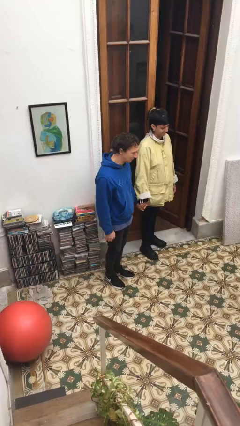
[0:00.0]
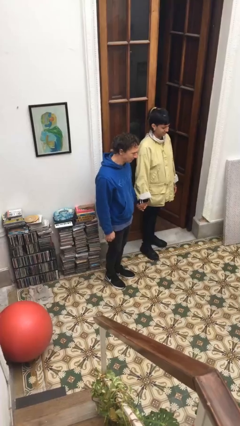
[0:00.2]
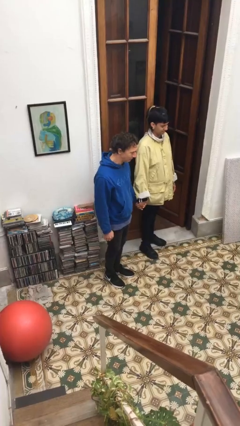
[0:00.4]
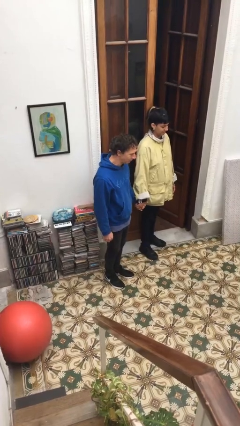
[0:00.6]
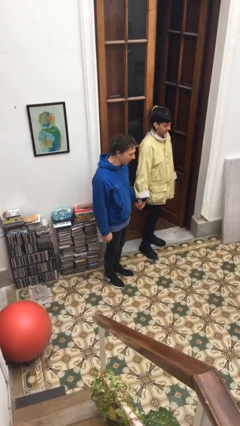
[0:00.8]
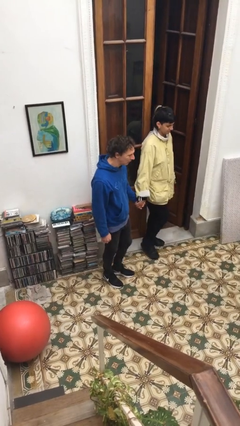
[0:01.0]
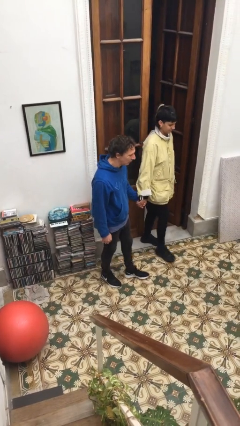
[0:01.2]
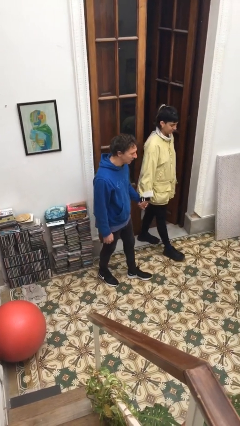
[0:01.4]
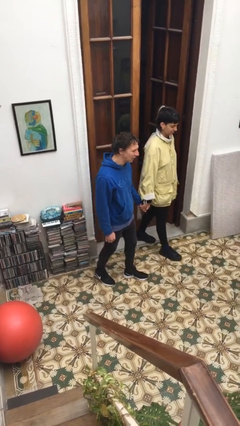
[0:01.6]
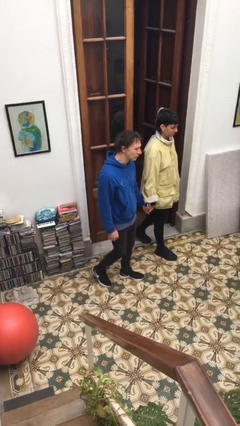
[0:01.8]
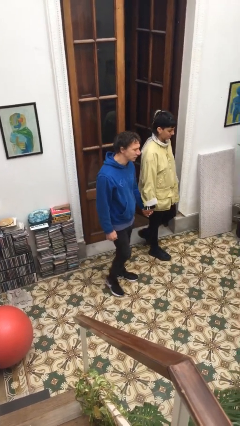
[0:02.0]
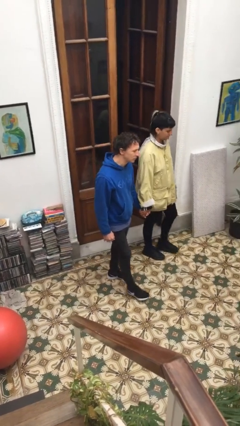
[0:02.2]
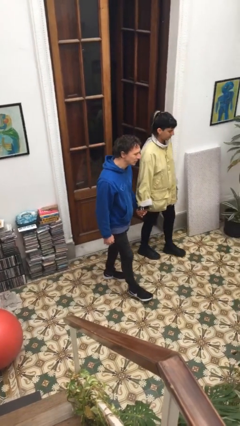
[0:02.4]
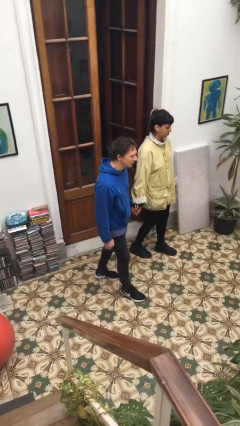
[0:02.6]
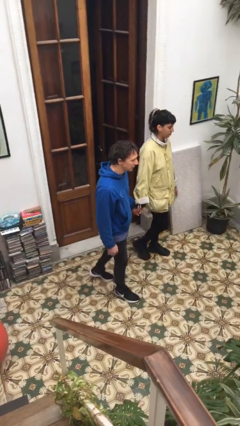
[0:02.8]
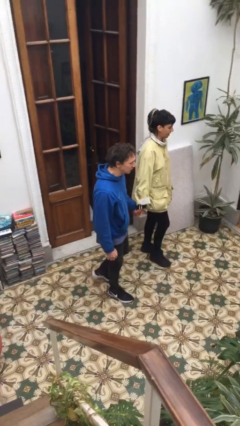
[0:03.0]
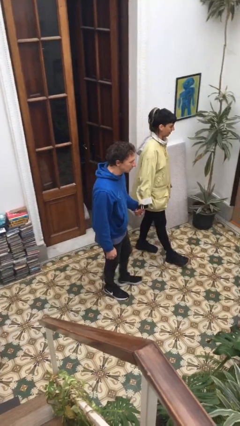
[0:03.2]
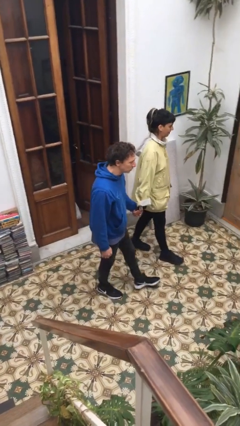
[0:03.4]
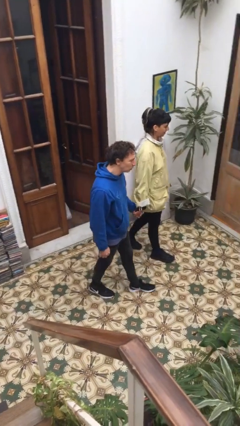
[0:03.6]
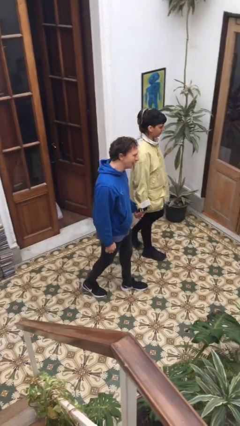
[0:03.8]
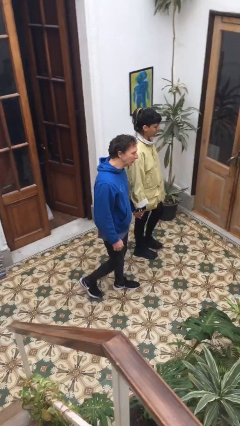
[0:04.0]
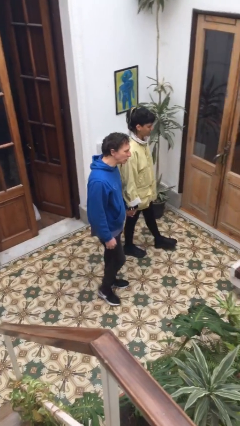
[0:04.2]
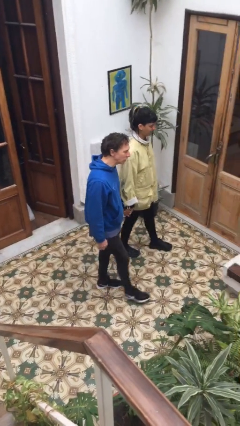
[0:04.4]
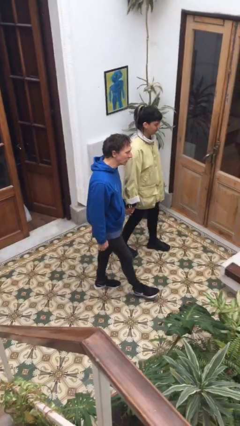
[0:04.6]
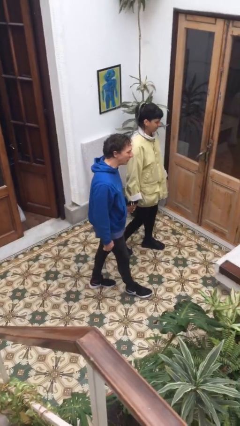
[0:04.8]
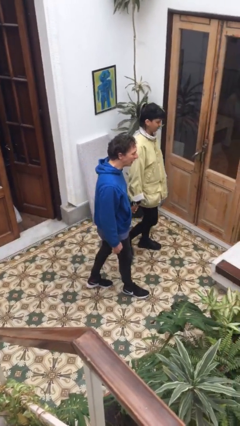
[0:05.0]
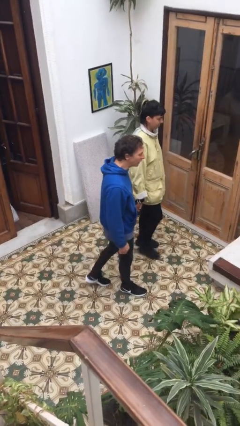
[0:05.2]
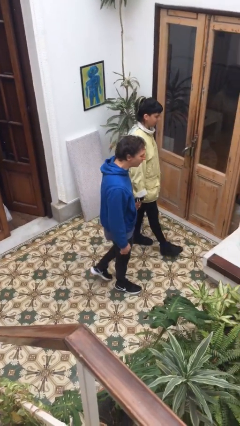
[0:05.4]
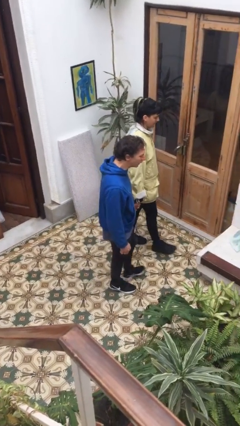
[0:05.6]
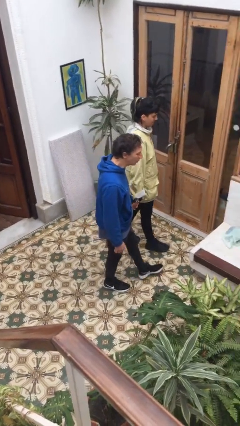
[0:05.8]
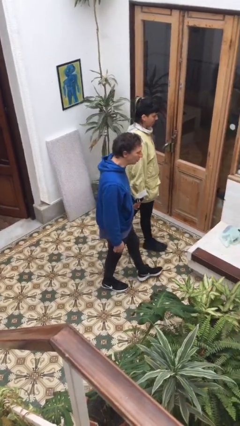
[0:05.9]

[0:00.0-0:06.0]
person holds hand

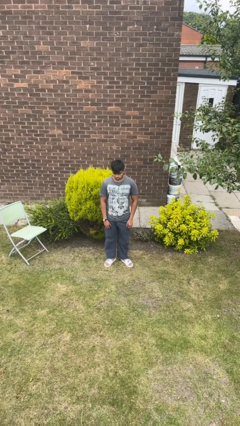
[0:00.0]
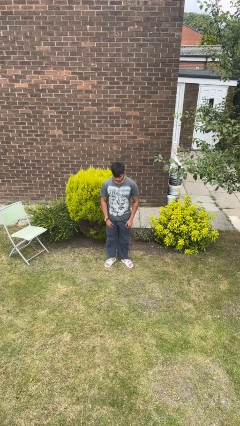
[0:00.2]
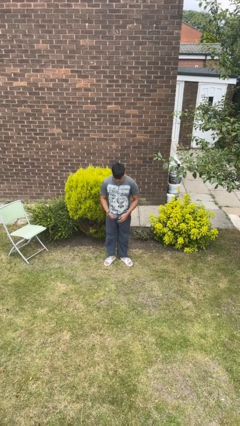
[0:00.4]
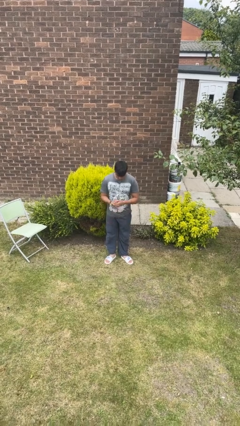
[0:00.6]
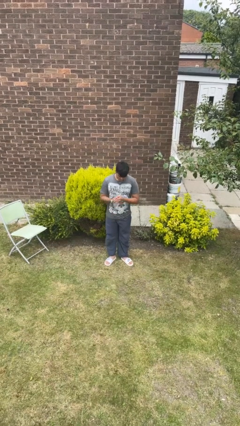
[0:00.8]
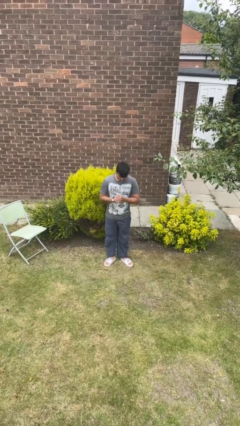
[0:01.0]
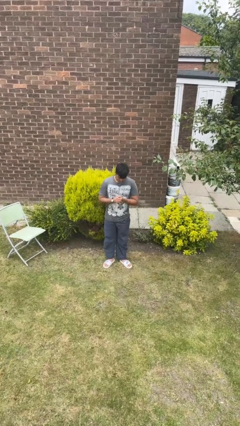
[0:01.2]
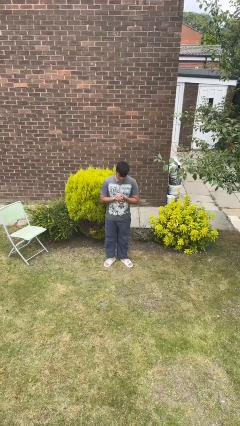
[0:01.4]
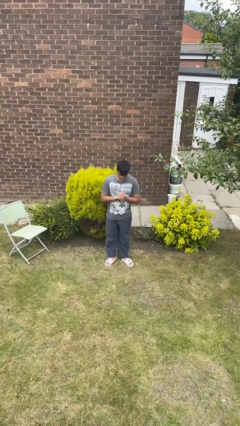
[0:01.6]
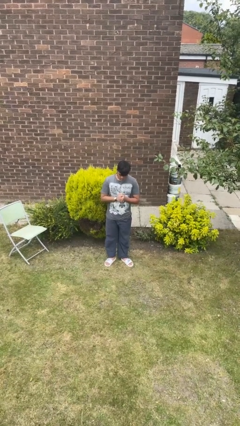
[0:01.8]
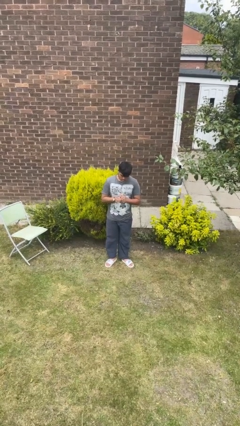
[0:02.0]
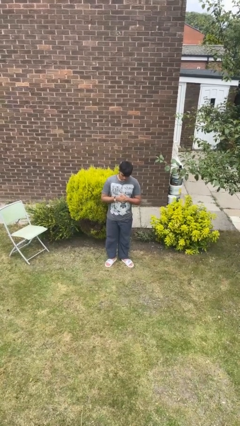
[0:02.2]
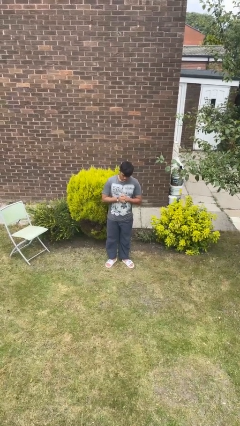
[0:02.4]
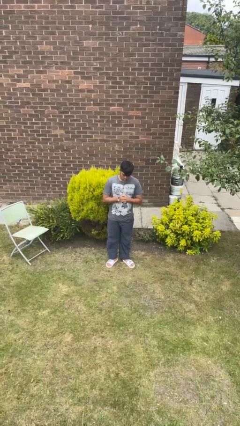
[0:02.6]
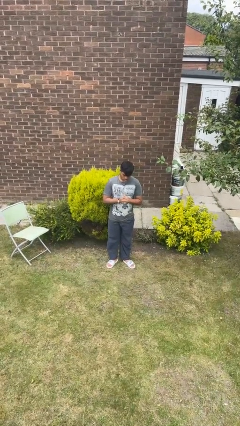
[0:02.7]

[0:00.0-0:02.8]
person cracks knuckles

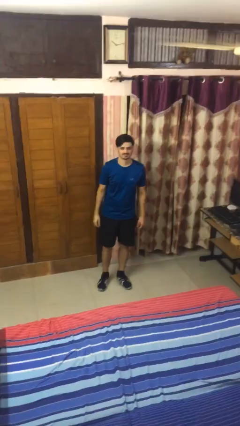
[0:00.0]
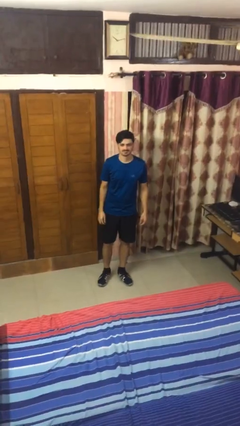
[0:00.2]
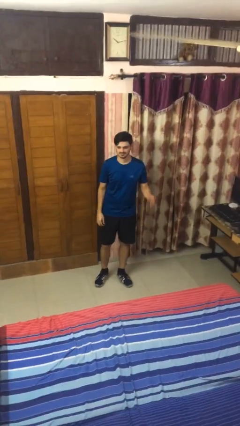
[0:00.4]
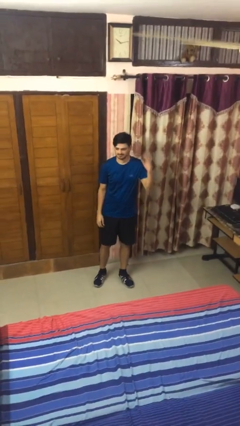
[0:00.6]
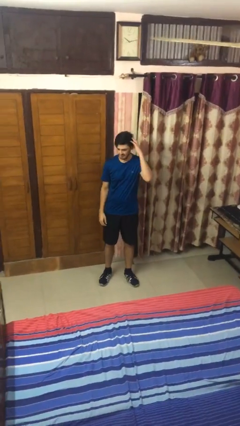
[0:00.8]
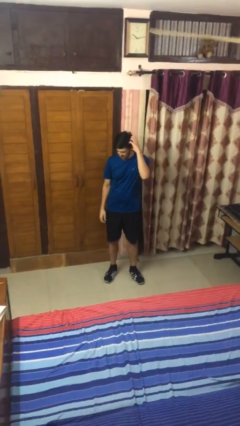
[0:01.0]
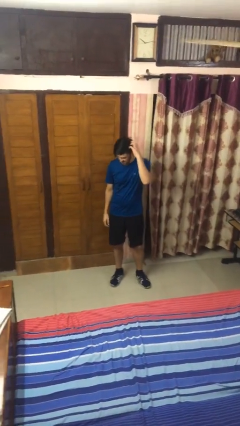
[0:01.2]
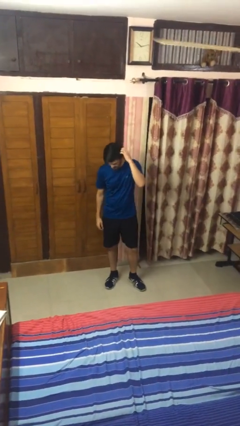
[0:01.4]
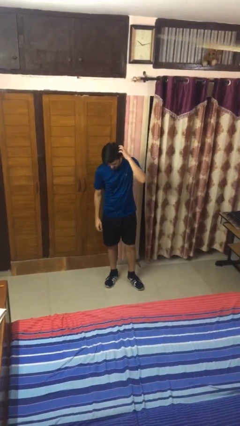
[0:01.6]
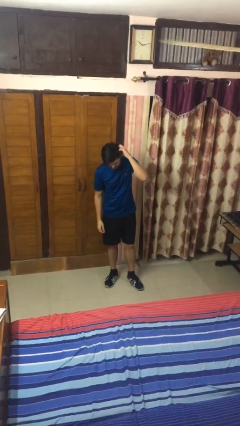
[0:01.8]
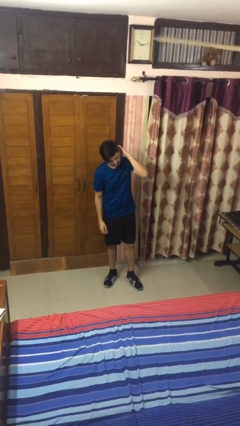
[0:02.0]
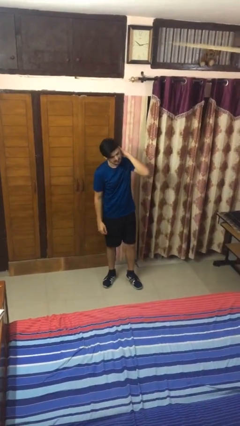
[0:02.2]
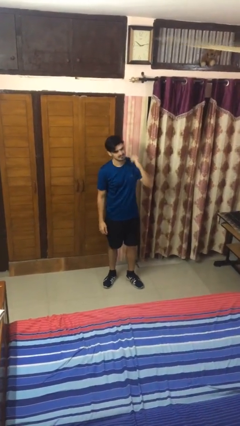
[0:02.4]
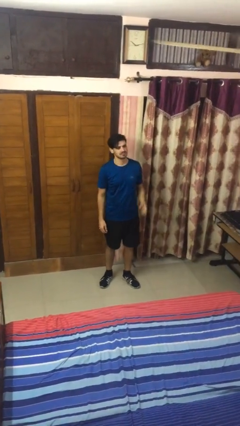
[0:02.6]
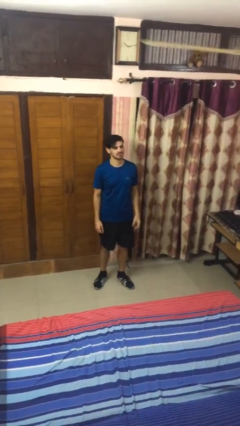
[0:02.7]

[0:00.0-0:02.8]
person scratches face

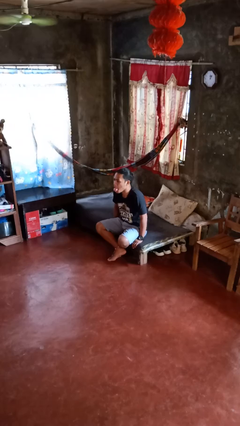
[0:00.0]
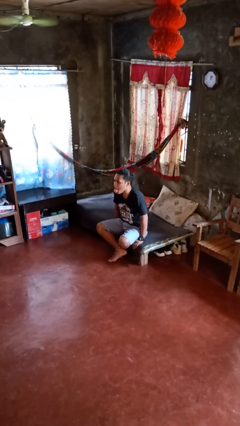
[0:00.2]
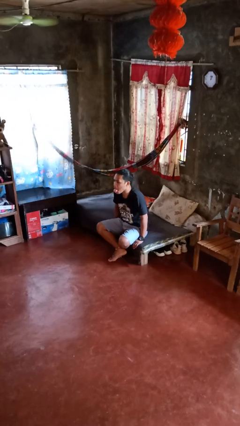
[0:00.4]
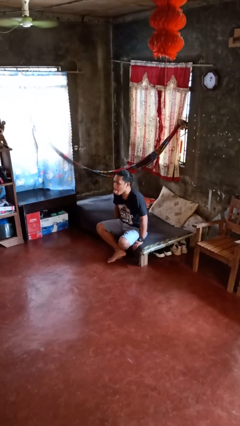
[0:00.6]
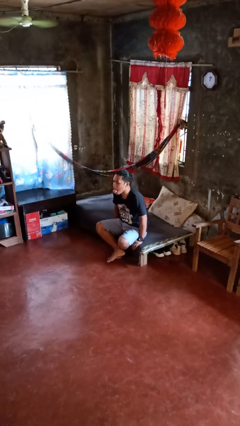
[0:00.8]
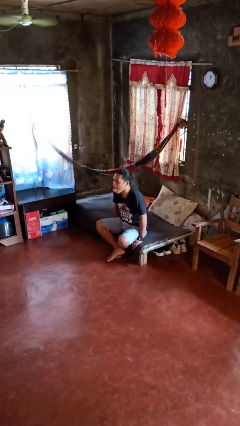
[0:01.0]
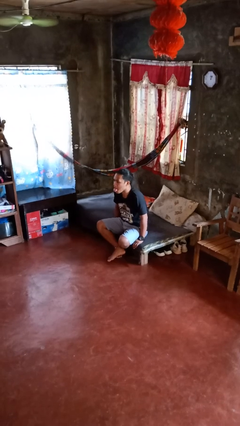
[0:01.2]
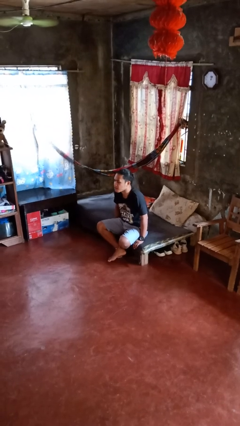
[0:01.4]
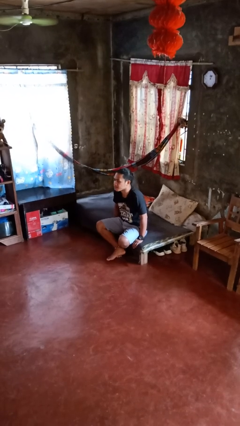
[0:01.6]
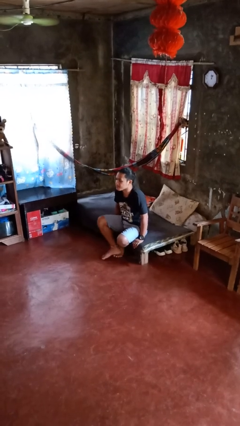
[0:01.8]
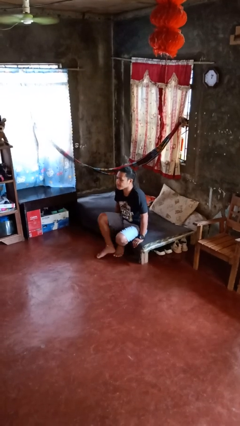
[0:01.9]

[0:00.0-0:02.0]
person sticks out tongue

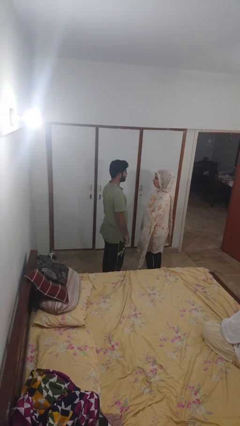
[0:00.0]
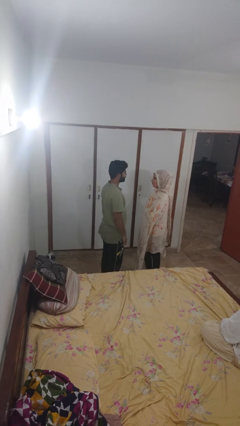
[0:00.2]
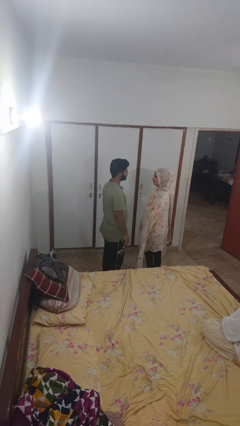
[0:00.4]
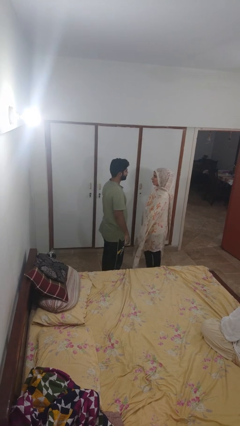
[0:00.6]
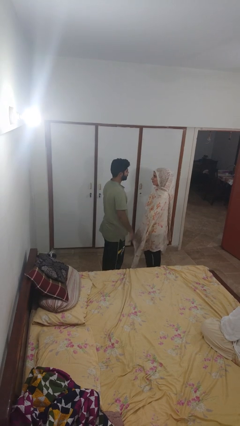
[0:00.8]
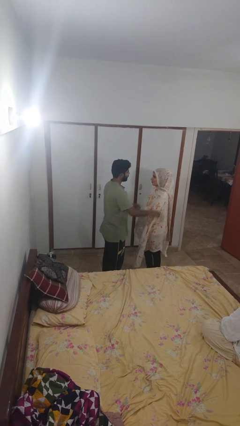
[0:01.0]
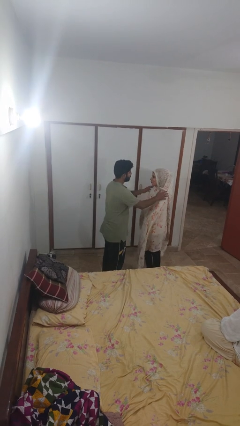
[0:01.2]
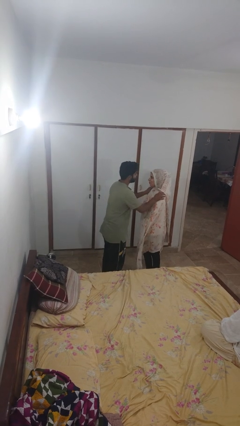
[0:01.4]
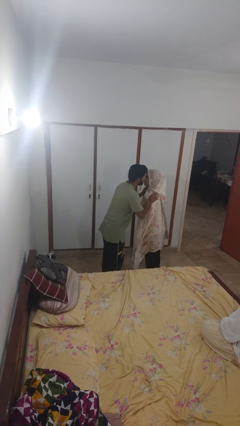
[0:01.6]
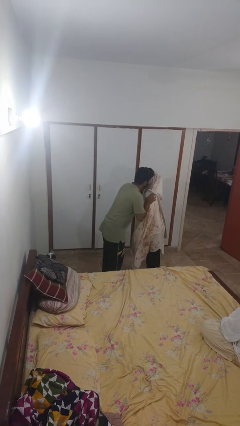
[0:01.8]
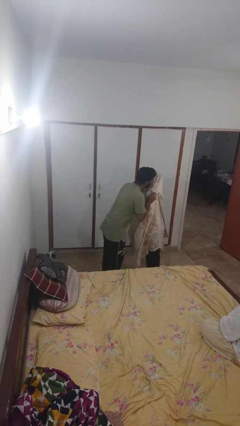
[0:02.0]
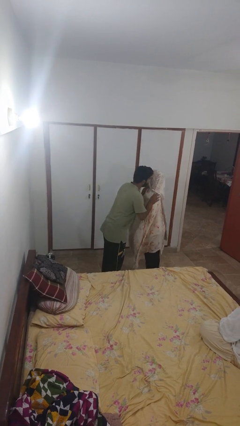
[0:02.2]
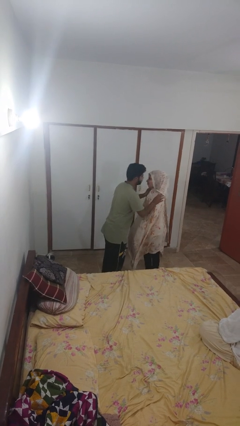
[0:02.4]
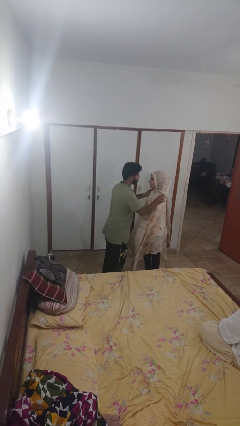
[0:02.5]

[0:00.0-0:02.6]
person kisses cheek of person

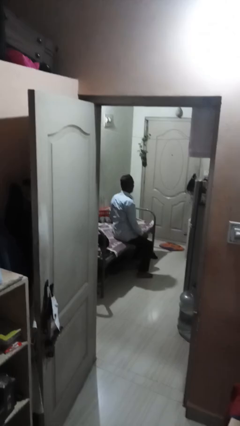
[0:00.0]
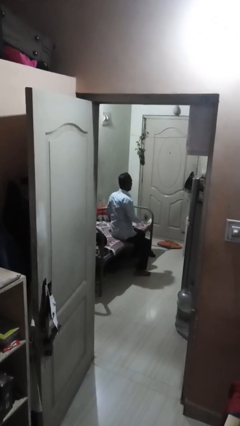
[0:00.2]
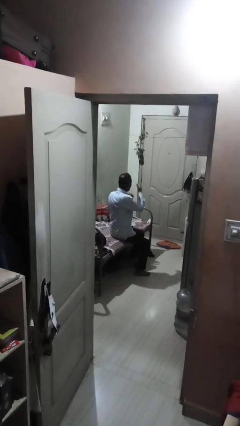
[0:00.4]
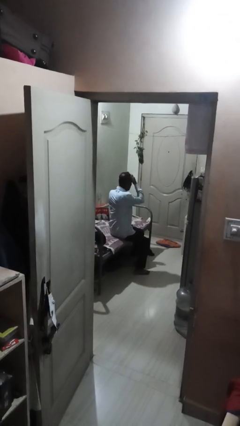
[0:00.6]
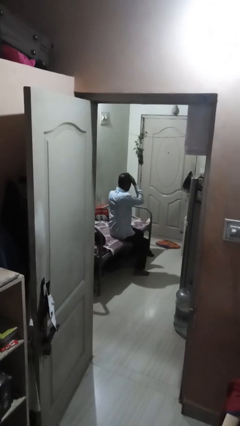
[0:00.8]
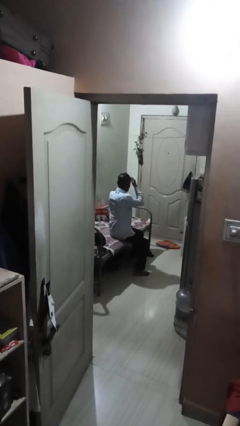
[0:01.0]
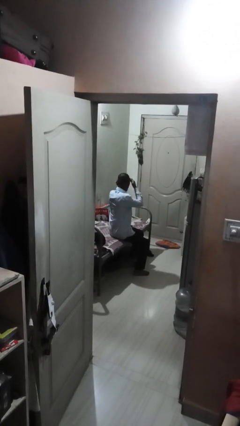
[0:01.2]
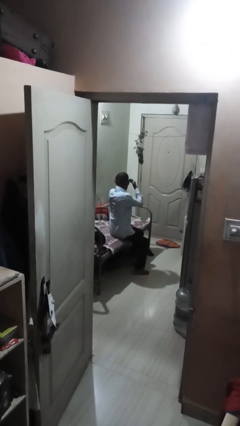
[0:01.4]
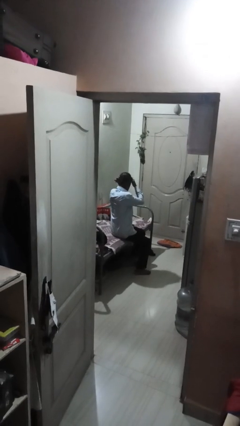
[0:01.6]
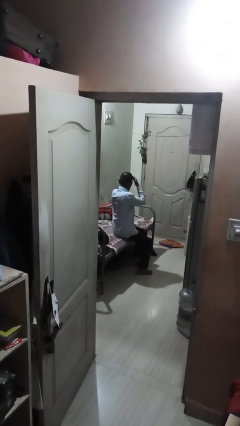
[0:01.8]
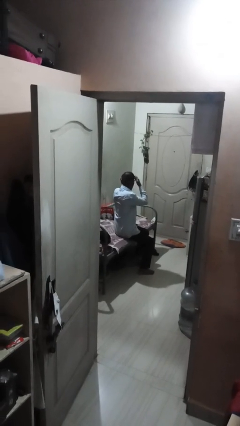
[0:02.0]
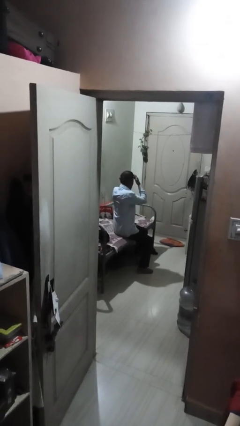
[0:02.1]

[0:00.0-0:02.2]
person strokes hair
